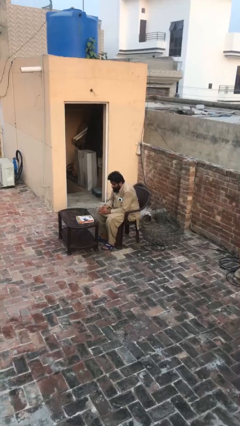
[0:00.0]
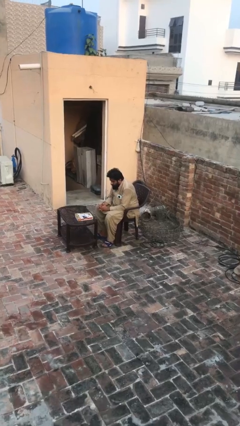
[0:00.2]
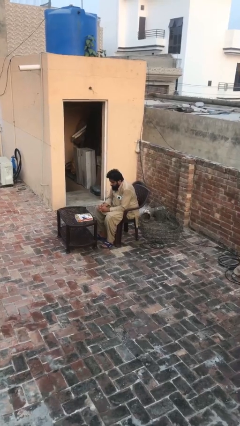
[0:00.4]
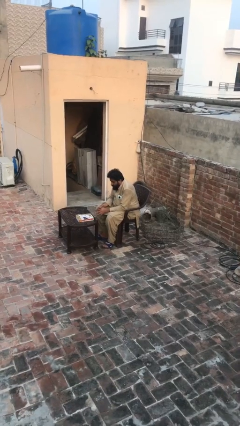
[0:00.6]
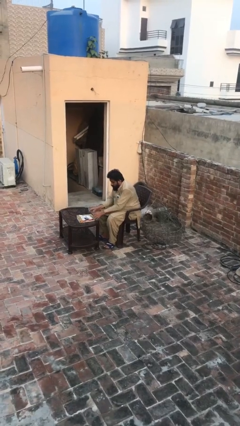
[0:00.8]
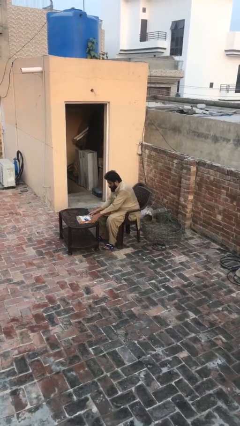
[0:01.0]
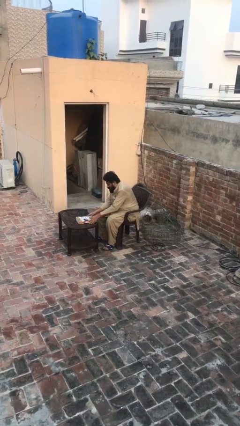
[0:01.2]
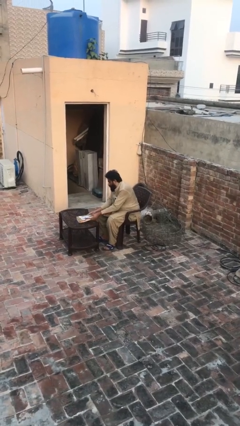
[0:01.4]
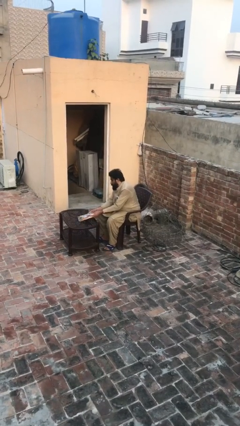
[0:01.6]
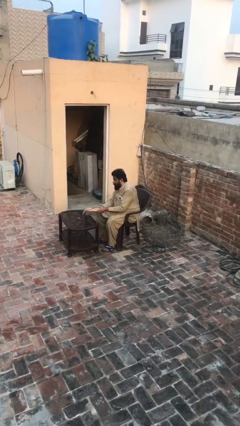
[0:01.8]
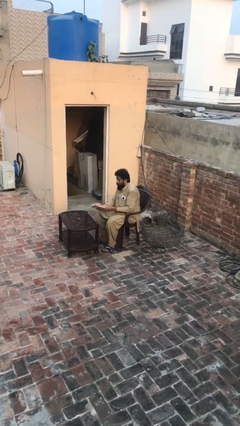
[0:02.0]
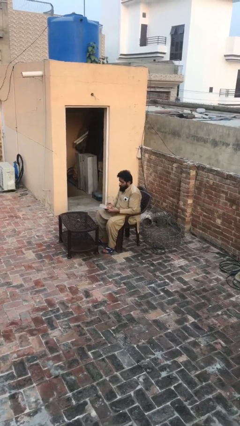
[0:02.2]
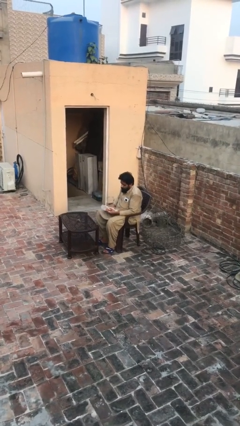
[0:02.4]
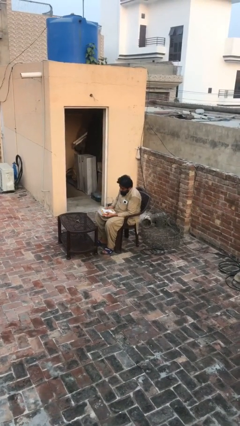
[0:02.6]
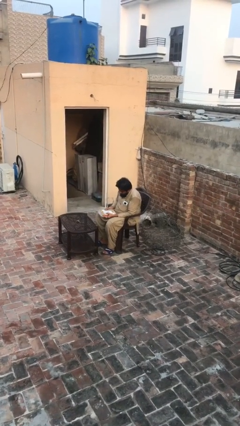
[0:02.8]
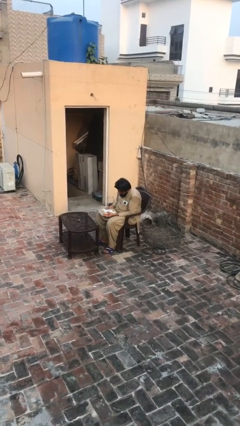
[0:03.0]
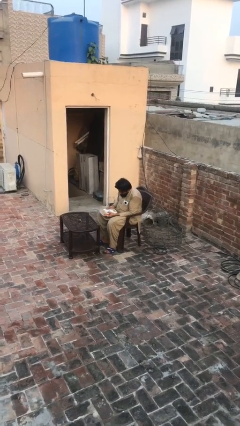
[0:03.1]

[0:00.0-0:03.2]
person picks up object from table

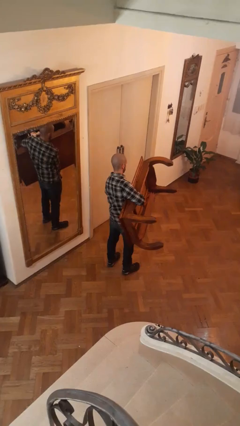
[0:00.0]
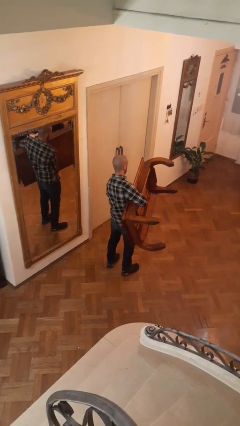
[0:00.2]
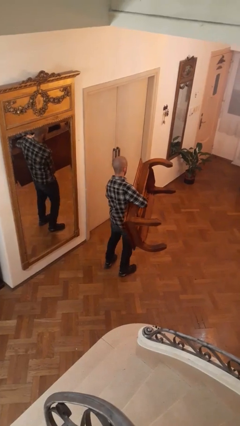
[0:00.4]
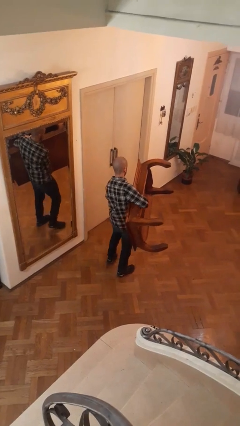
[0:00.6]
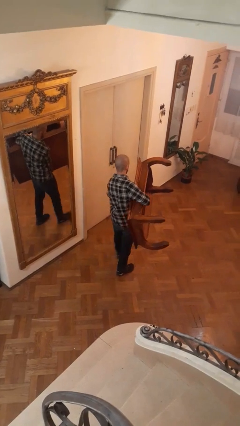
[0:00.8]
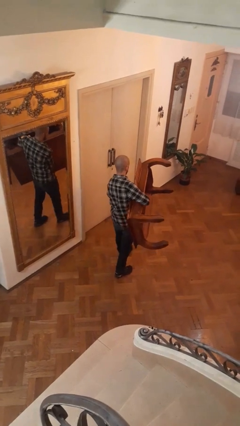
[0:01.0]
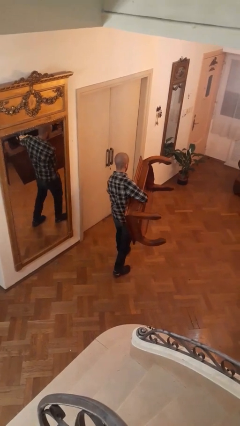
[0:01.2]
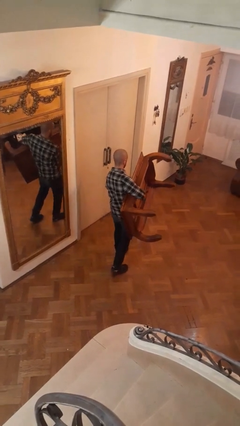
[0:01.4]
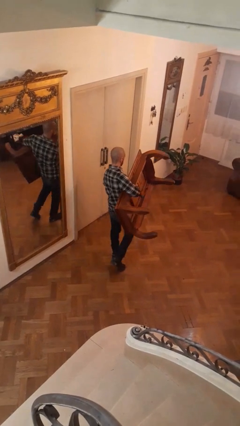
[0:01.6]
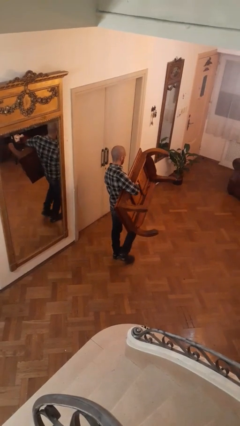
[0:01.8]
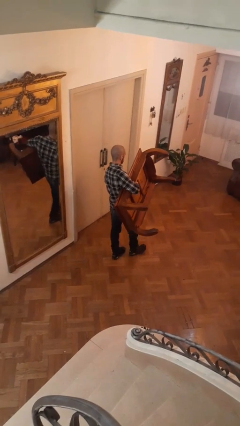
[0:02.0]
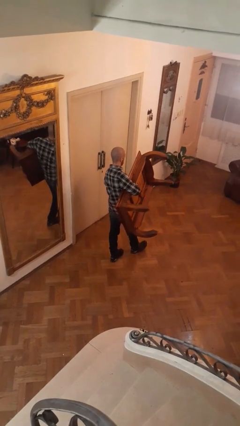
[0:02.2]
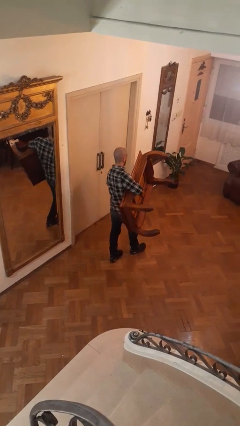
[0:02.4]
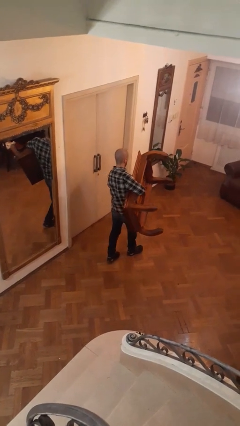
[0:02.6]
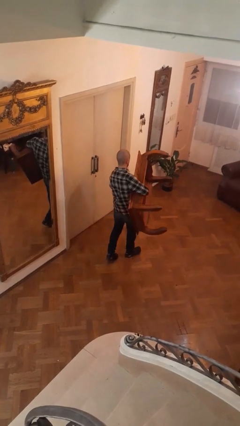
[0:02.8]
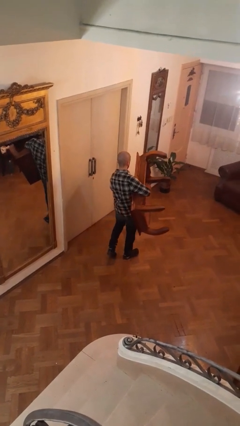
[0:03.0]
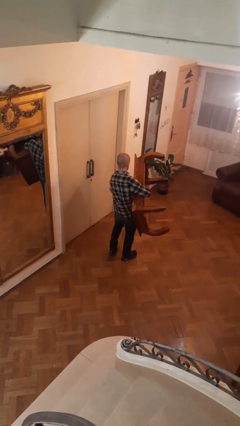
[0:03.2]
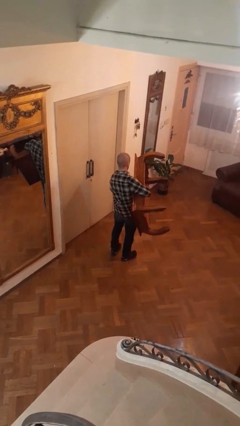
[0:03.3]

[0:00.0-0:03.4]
person carries furniture

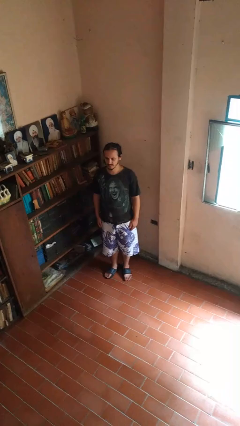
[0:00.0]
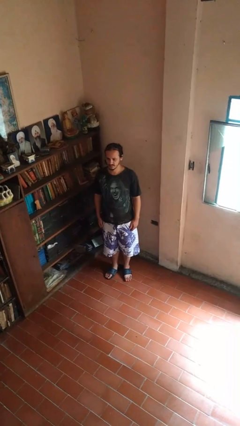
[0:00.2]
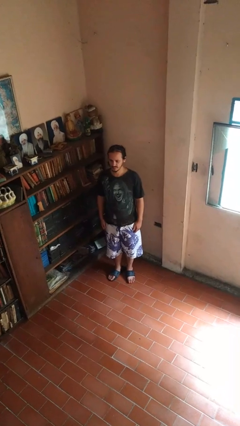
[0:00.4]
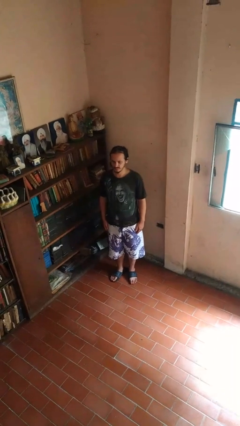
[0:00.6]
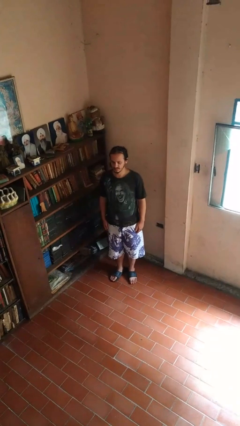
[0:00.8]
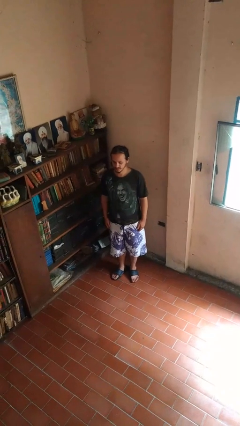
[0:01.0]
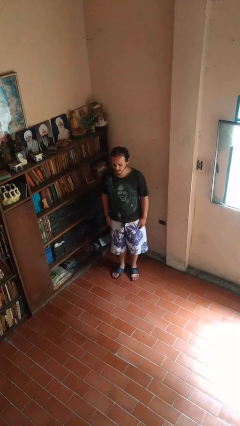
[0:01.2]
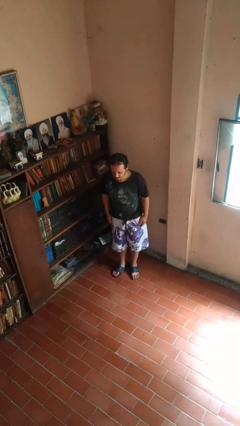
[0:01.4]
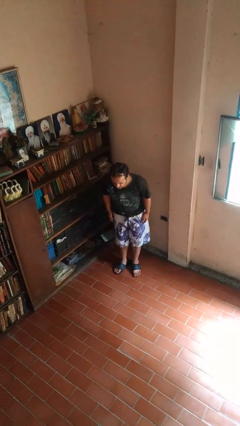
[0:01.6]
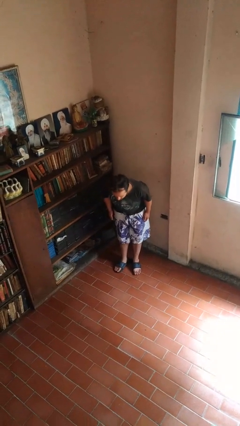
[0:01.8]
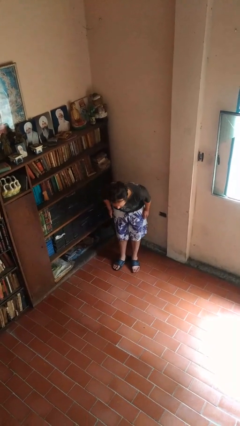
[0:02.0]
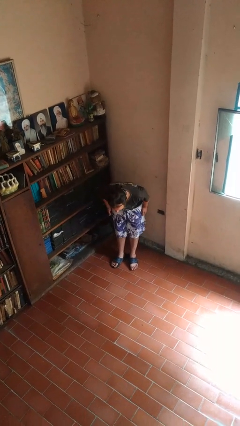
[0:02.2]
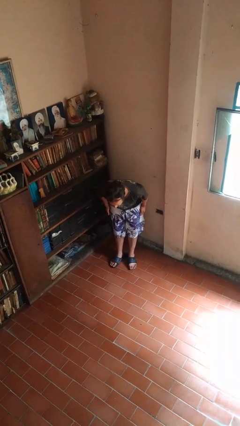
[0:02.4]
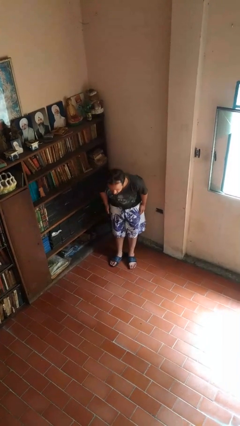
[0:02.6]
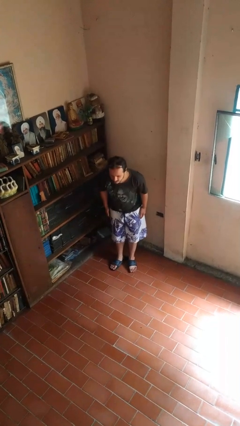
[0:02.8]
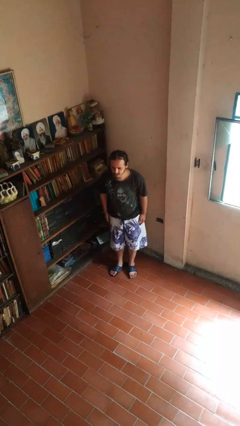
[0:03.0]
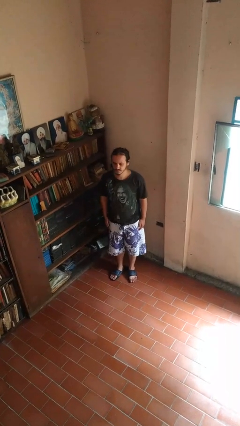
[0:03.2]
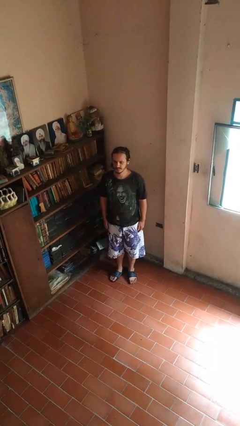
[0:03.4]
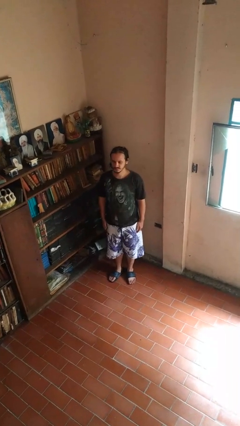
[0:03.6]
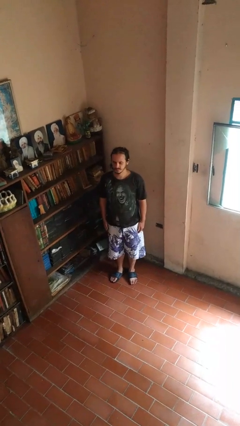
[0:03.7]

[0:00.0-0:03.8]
person bows

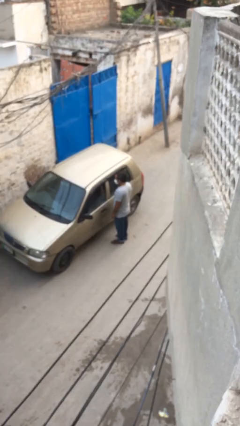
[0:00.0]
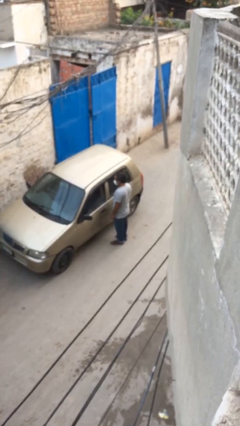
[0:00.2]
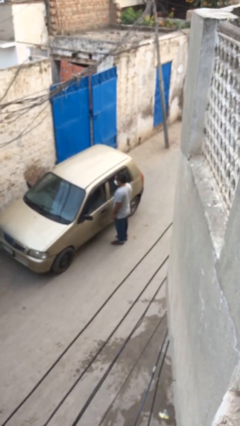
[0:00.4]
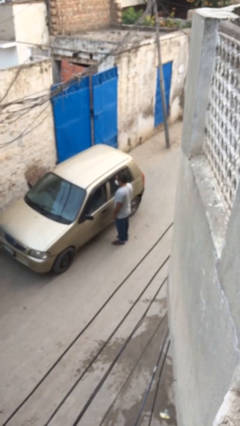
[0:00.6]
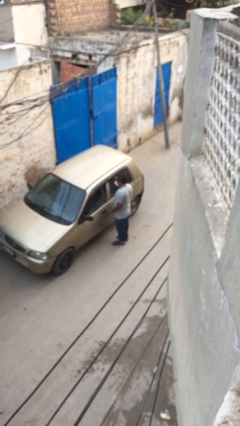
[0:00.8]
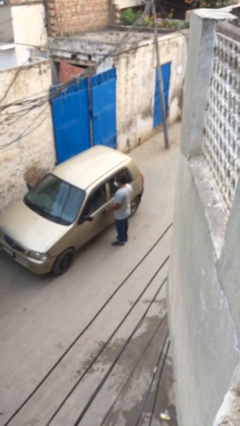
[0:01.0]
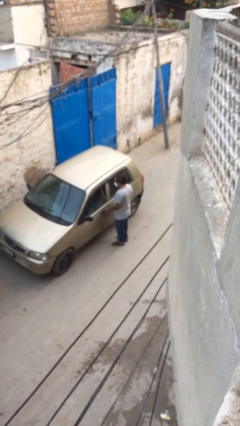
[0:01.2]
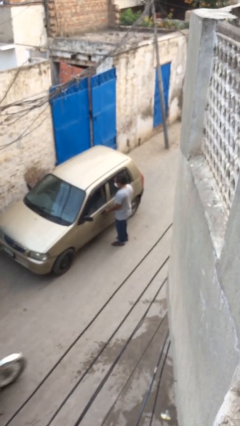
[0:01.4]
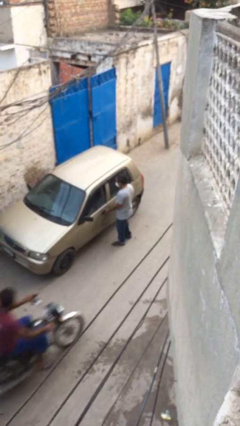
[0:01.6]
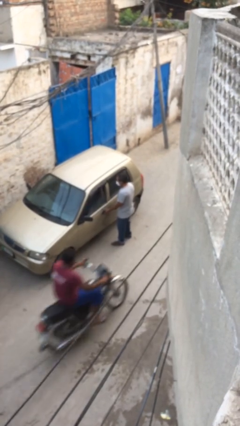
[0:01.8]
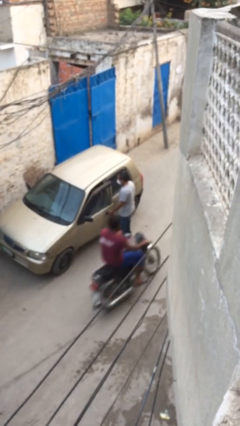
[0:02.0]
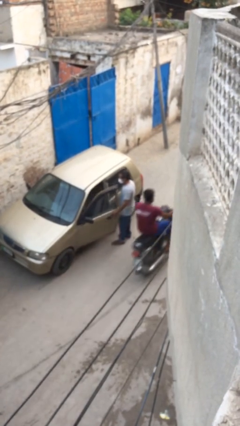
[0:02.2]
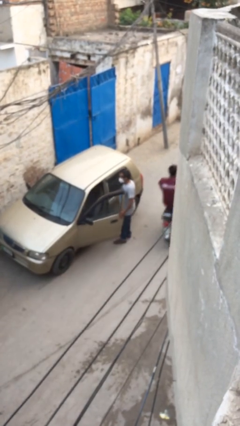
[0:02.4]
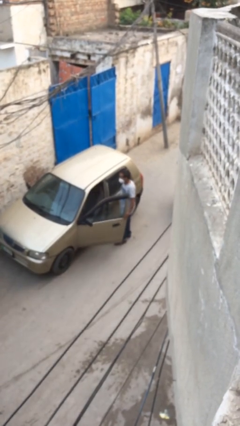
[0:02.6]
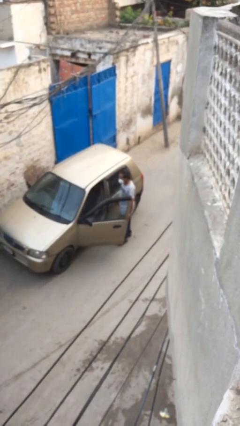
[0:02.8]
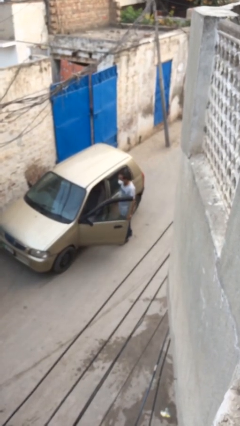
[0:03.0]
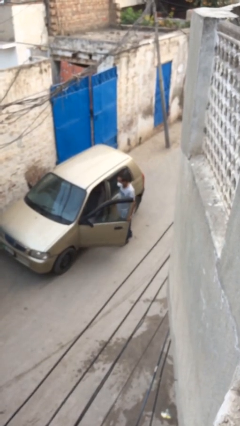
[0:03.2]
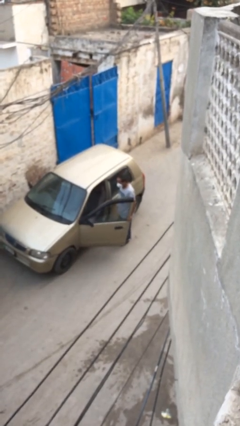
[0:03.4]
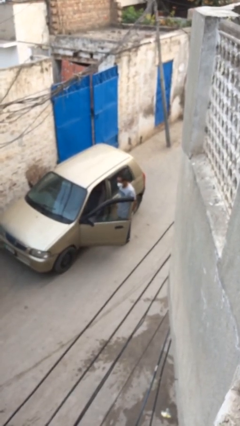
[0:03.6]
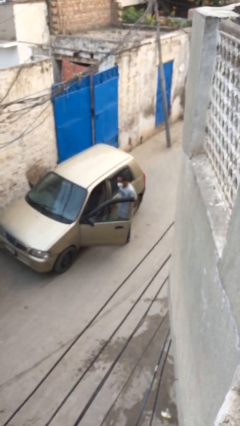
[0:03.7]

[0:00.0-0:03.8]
person opens car door

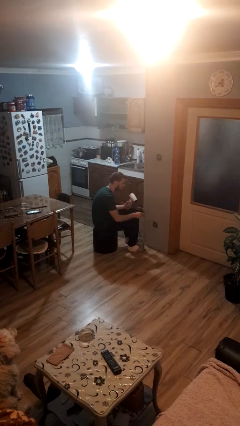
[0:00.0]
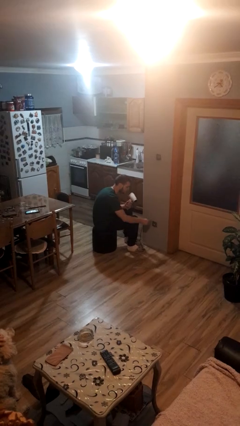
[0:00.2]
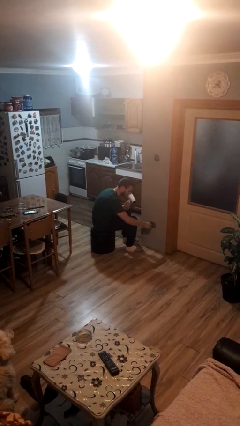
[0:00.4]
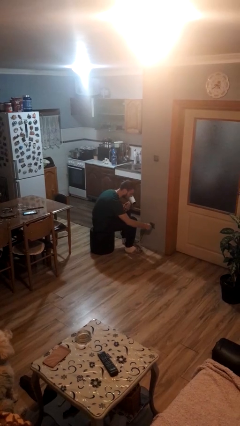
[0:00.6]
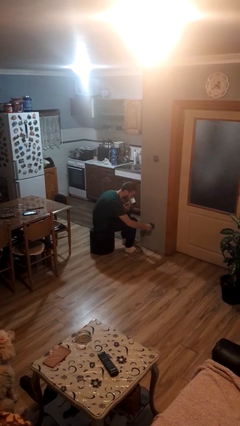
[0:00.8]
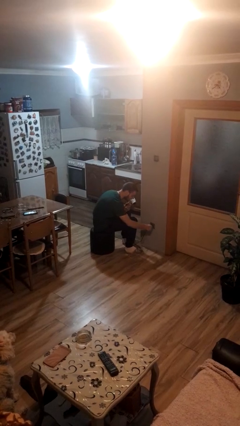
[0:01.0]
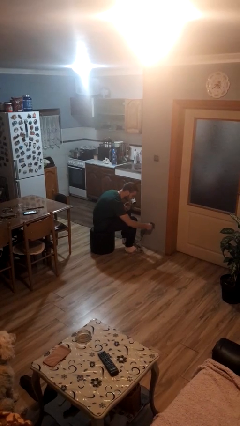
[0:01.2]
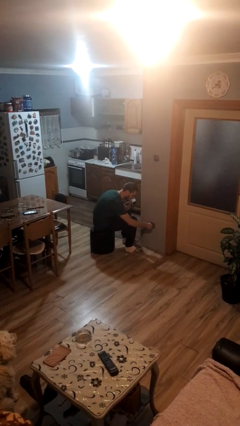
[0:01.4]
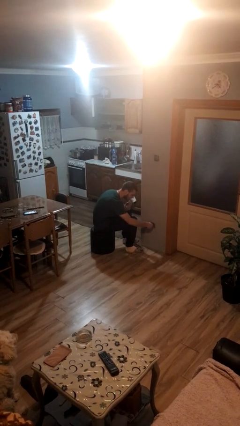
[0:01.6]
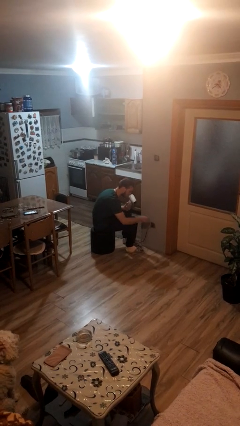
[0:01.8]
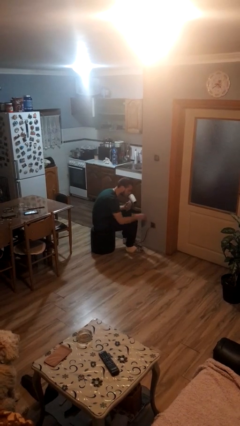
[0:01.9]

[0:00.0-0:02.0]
person plugs into electrical socket

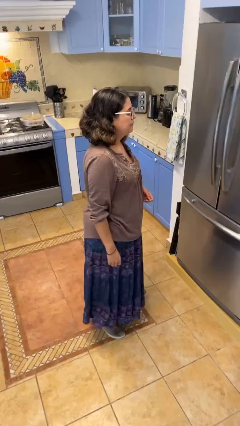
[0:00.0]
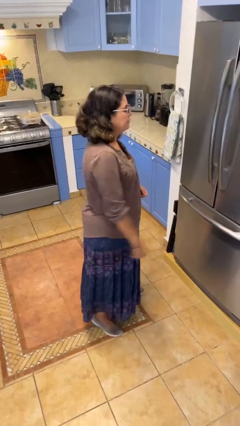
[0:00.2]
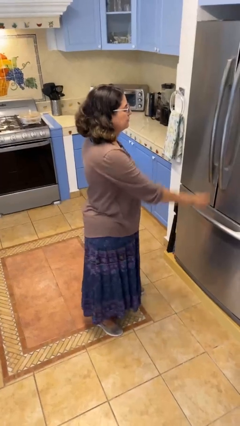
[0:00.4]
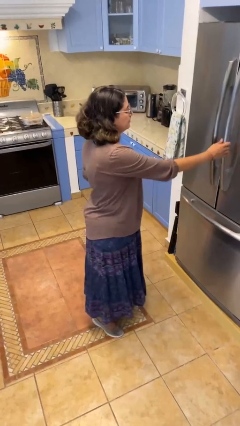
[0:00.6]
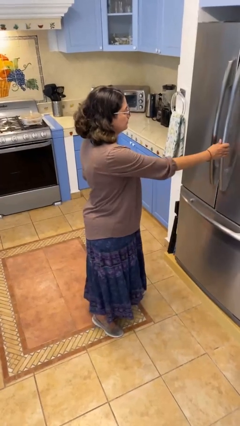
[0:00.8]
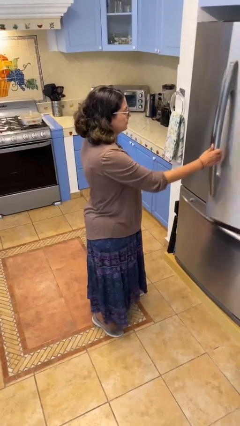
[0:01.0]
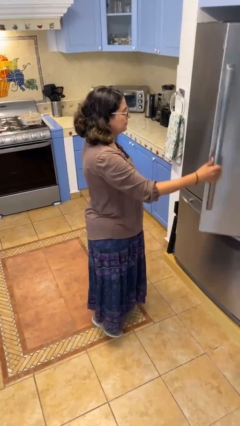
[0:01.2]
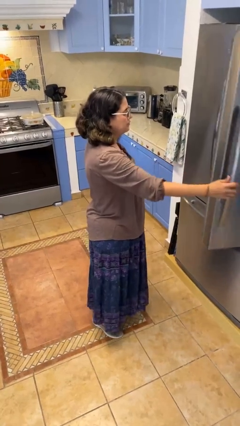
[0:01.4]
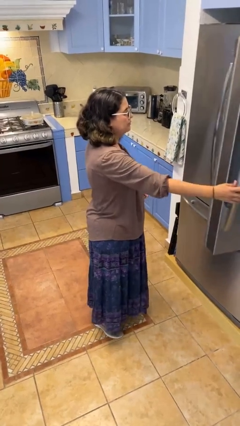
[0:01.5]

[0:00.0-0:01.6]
person opens refrigerator
